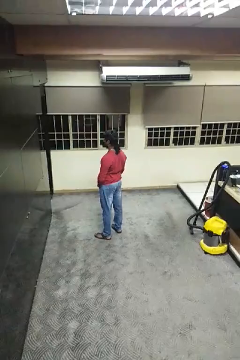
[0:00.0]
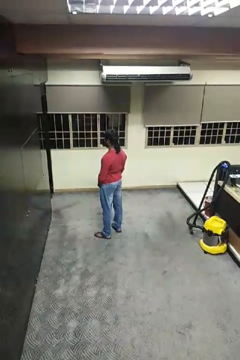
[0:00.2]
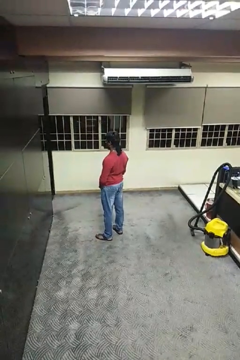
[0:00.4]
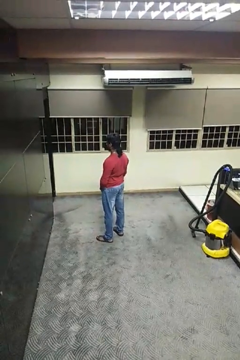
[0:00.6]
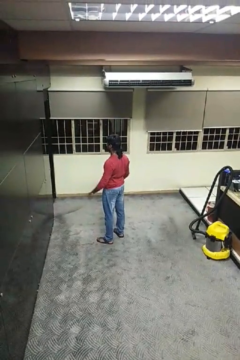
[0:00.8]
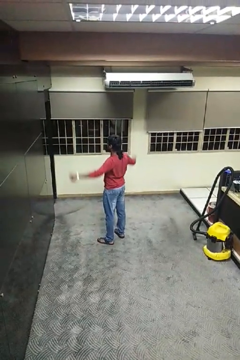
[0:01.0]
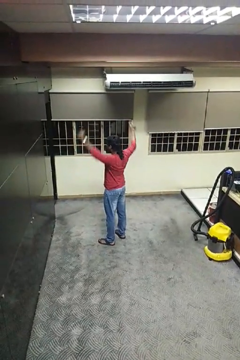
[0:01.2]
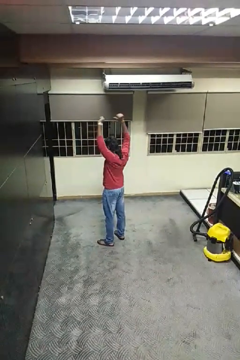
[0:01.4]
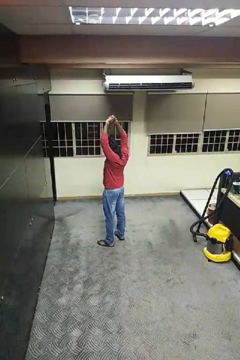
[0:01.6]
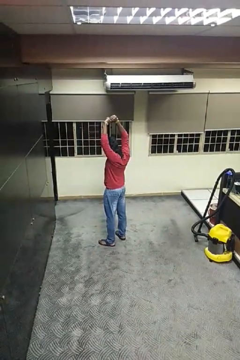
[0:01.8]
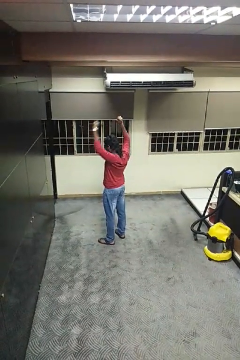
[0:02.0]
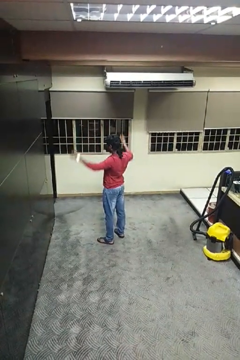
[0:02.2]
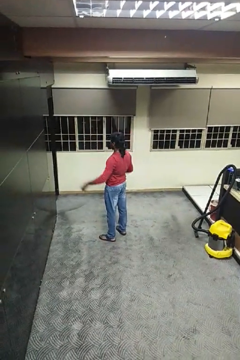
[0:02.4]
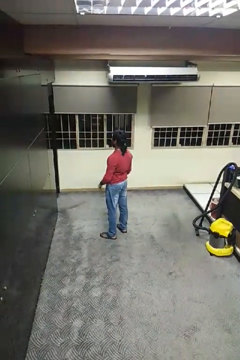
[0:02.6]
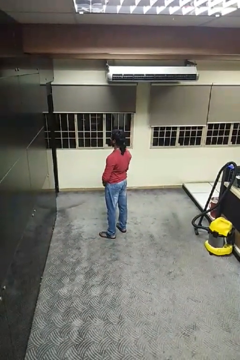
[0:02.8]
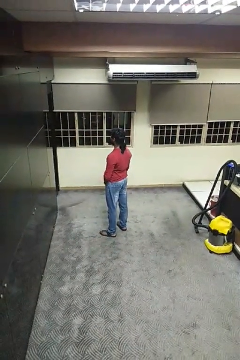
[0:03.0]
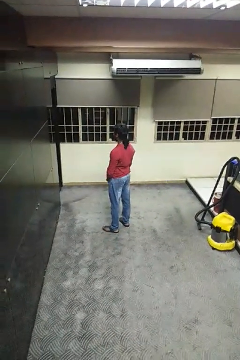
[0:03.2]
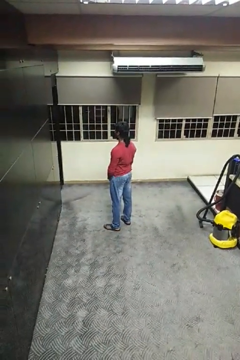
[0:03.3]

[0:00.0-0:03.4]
person stretches arms over head

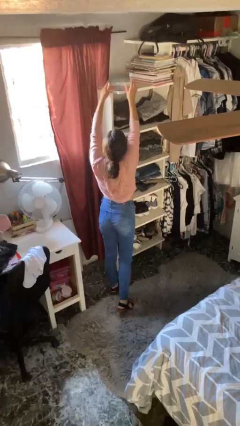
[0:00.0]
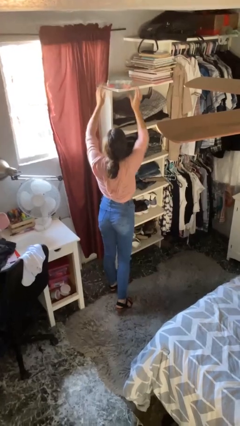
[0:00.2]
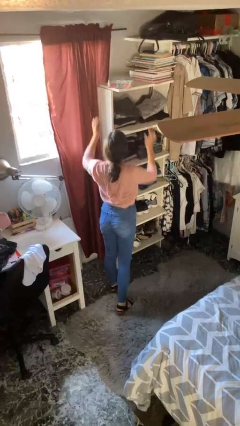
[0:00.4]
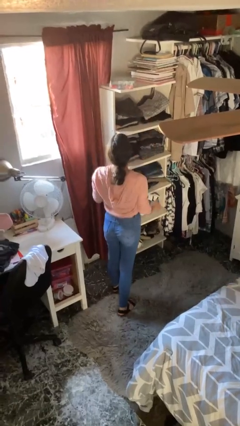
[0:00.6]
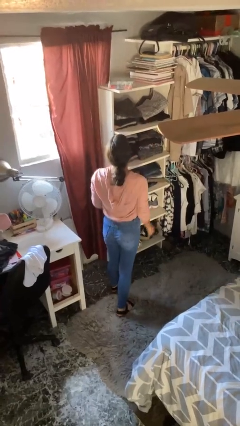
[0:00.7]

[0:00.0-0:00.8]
person puts down object on shelf

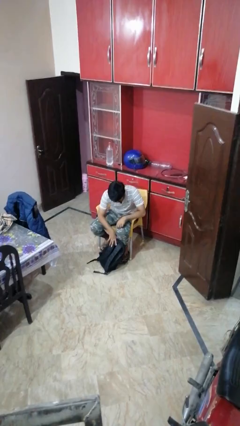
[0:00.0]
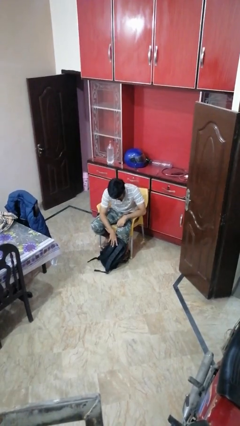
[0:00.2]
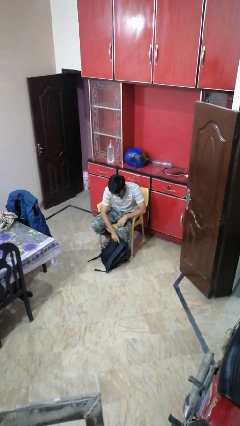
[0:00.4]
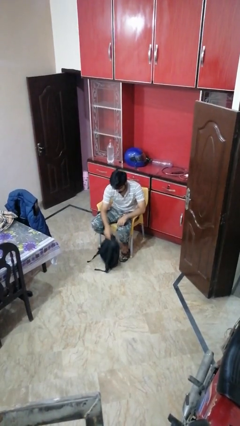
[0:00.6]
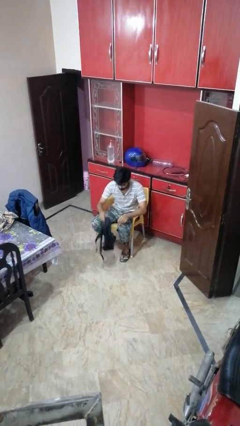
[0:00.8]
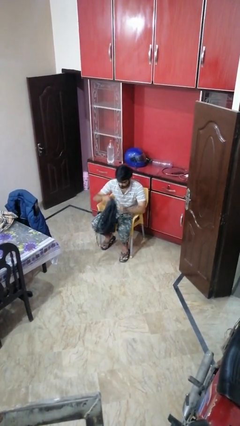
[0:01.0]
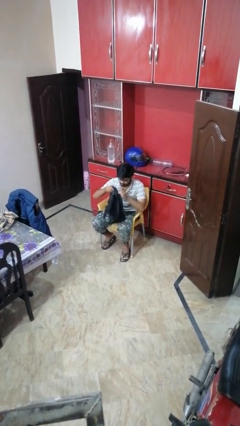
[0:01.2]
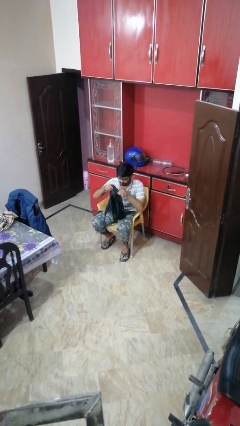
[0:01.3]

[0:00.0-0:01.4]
person picks up object from floor

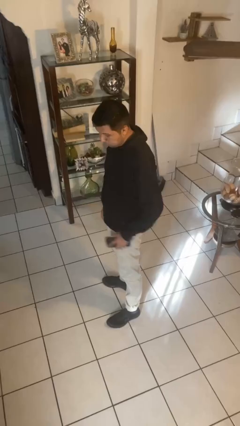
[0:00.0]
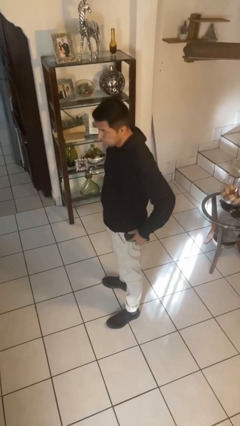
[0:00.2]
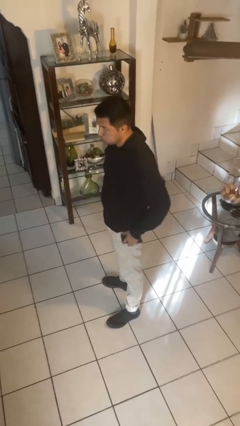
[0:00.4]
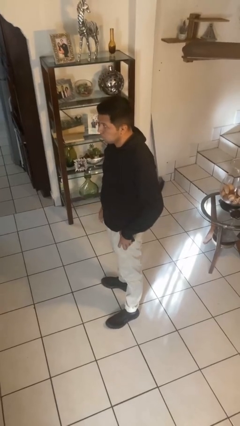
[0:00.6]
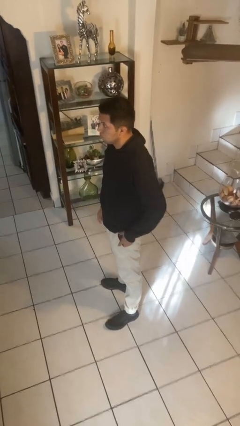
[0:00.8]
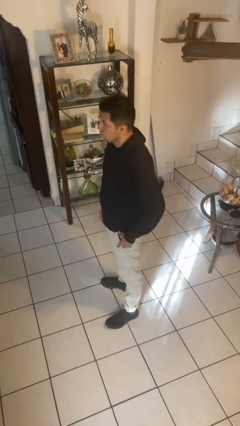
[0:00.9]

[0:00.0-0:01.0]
person puts phone into pocket

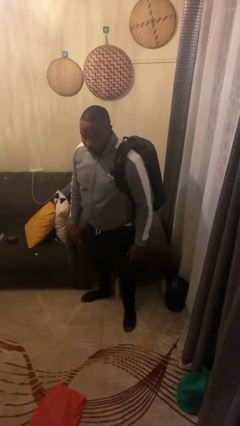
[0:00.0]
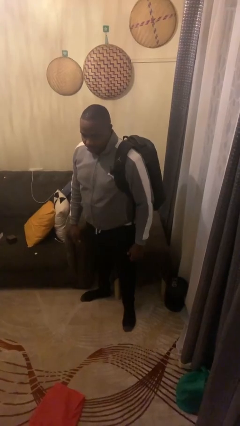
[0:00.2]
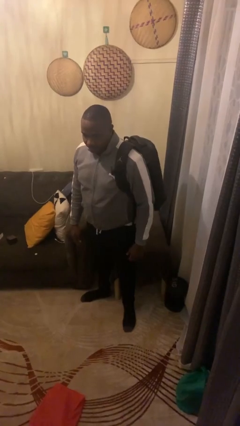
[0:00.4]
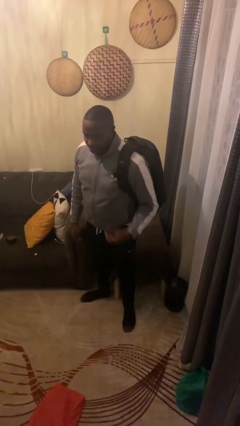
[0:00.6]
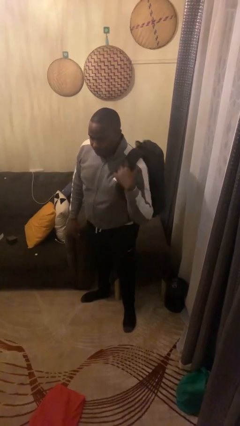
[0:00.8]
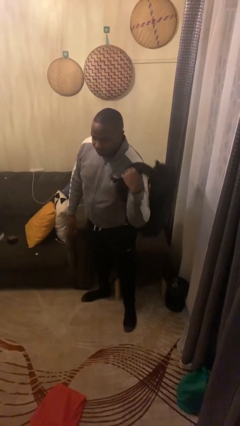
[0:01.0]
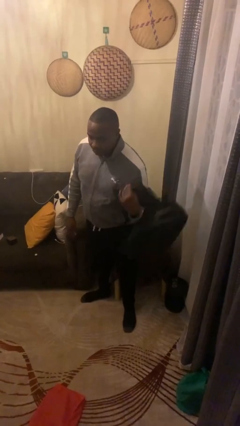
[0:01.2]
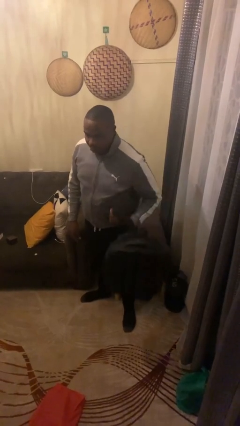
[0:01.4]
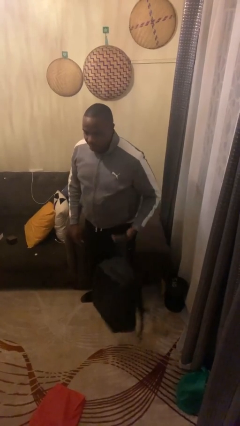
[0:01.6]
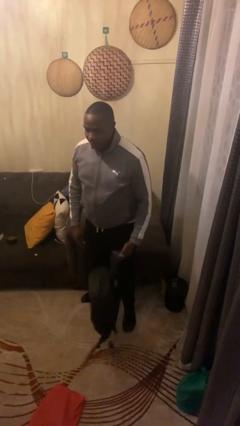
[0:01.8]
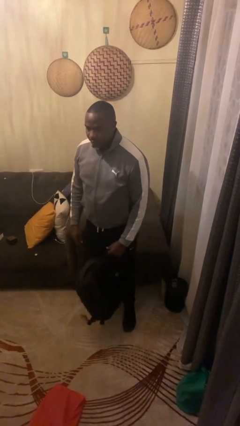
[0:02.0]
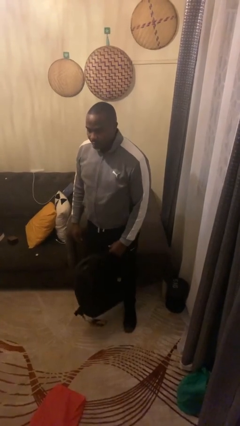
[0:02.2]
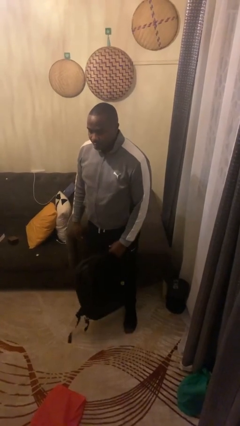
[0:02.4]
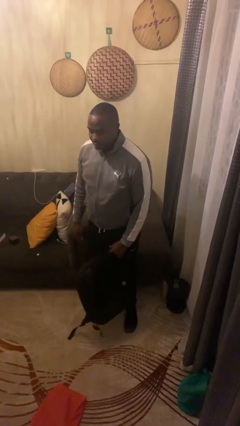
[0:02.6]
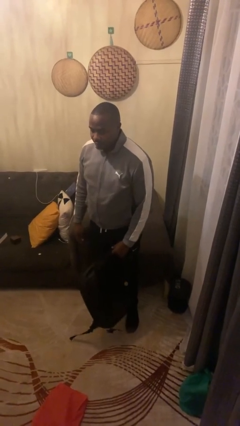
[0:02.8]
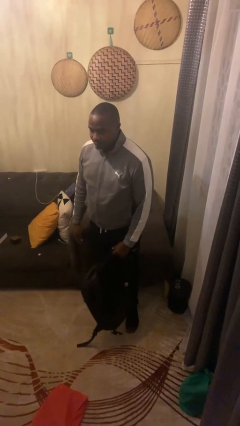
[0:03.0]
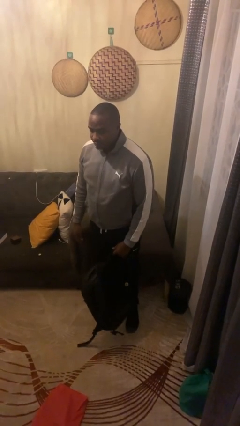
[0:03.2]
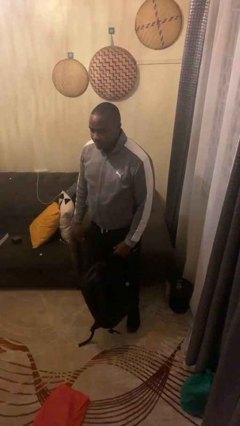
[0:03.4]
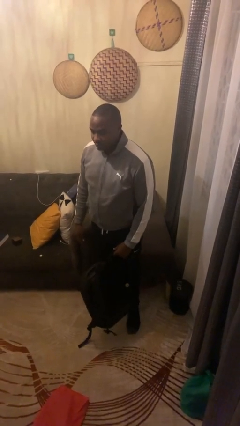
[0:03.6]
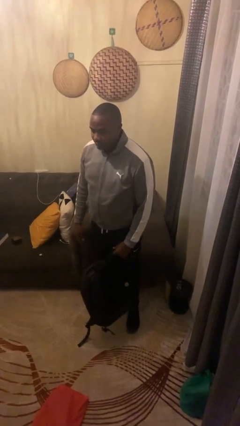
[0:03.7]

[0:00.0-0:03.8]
person takes off backpack

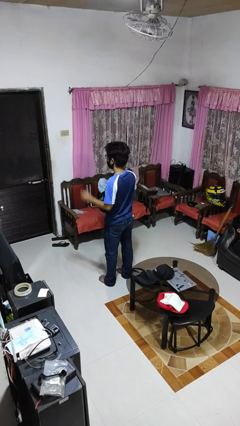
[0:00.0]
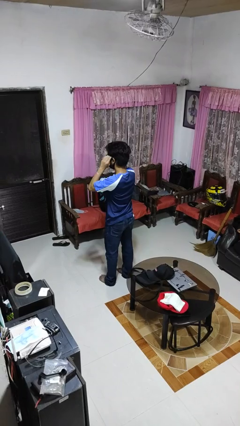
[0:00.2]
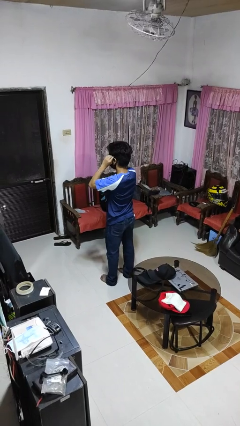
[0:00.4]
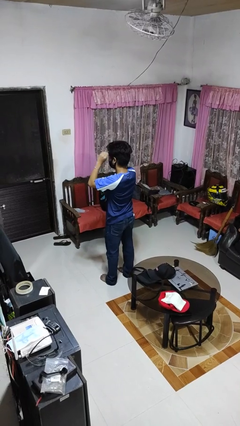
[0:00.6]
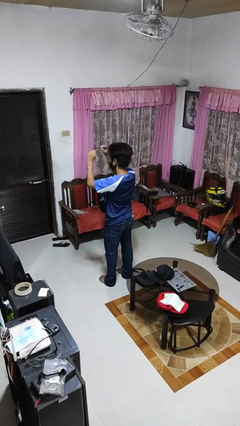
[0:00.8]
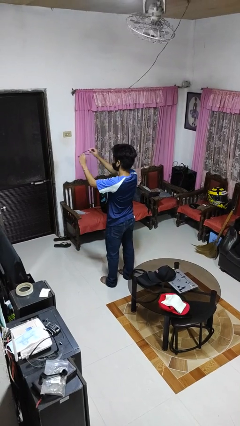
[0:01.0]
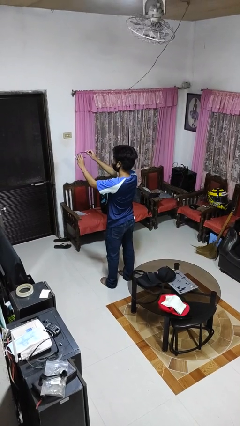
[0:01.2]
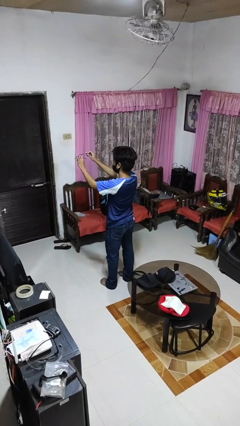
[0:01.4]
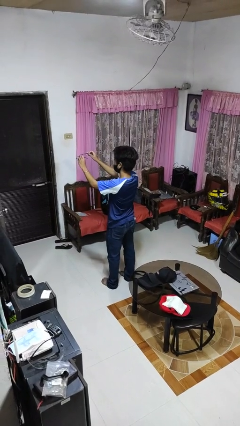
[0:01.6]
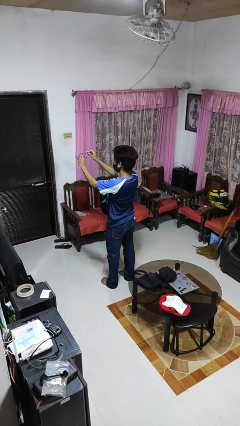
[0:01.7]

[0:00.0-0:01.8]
person takes off glasses

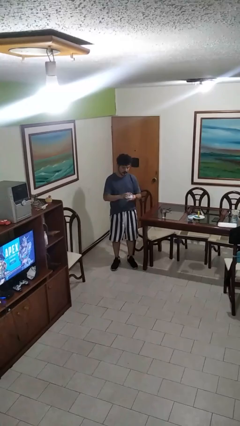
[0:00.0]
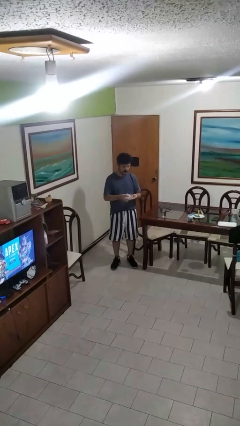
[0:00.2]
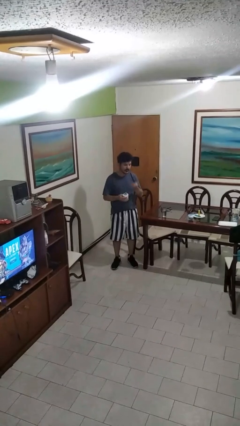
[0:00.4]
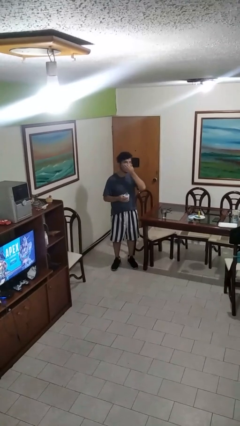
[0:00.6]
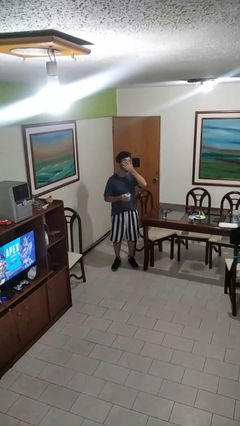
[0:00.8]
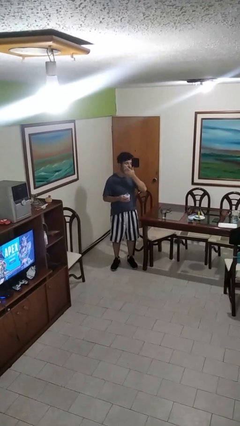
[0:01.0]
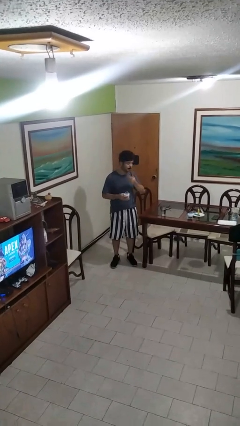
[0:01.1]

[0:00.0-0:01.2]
person takes medicine pills

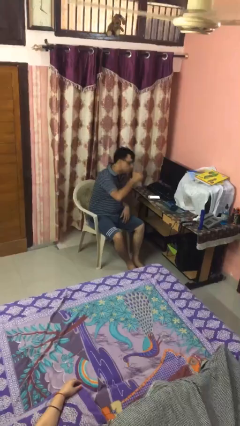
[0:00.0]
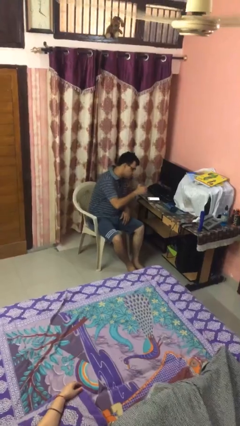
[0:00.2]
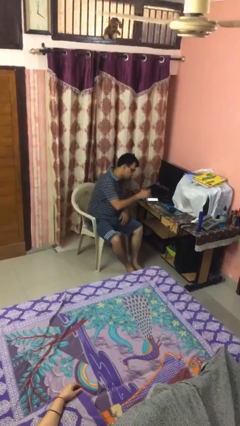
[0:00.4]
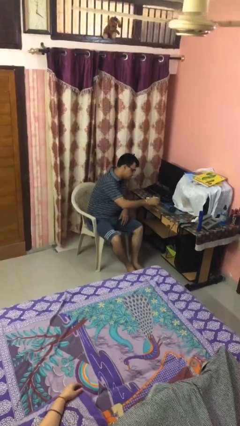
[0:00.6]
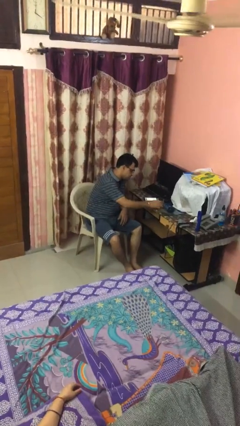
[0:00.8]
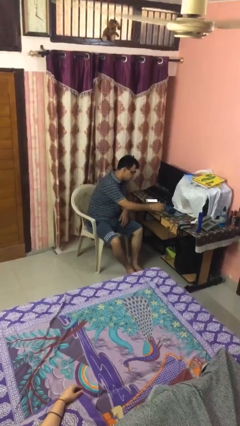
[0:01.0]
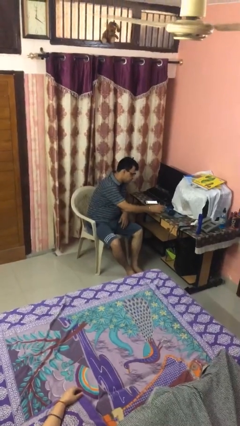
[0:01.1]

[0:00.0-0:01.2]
person puts down object on table

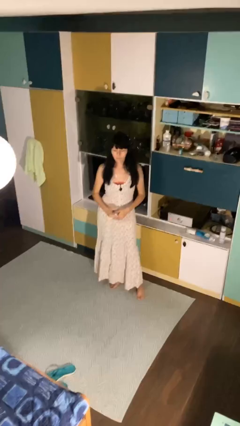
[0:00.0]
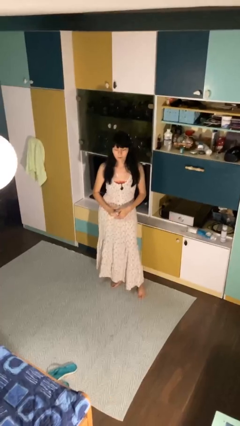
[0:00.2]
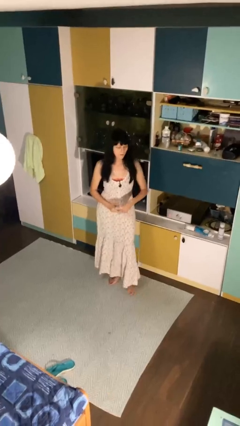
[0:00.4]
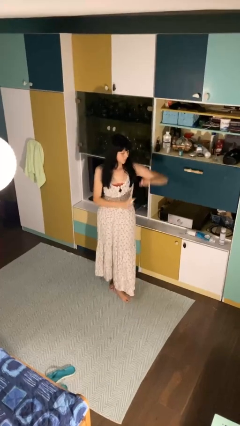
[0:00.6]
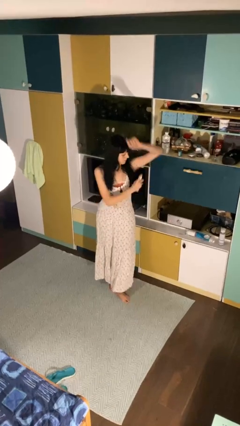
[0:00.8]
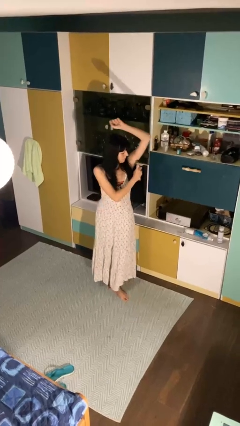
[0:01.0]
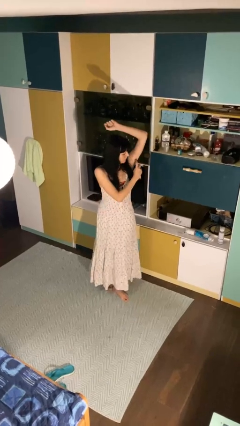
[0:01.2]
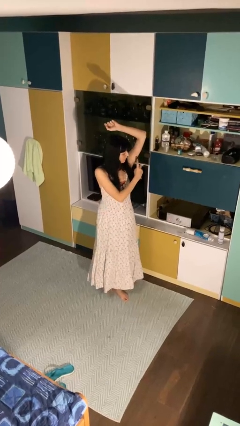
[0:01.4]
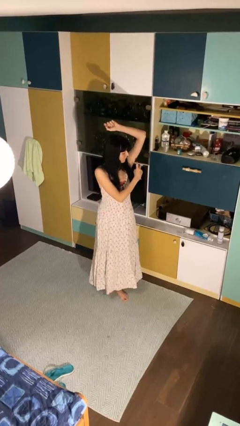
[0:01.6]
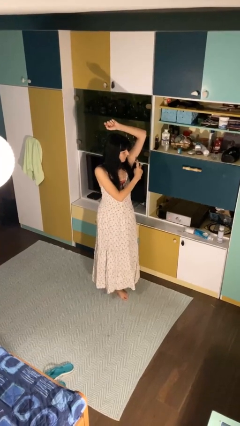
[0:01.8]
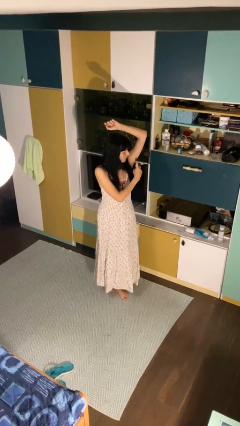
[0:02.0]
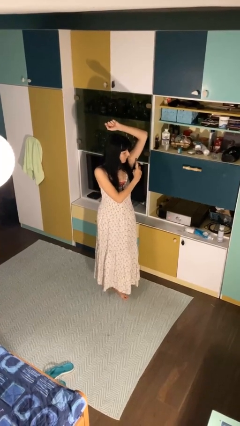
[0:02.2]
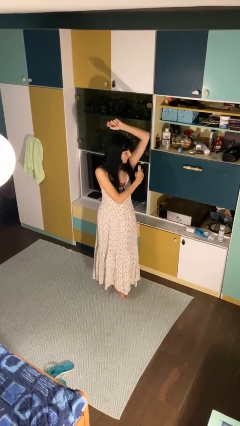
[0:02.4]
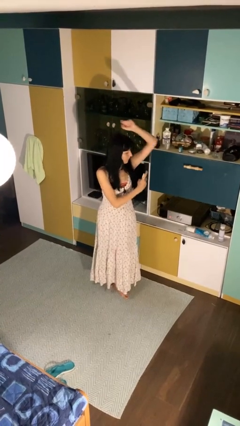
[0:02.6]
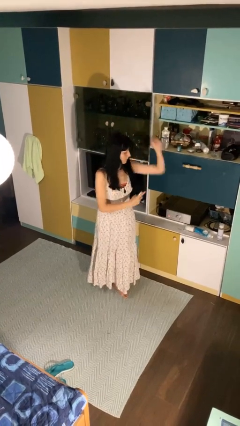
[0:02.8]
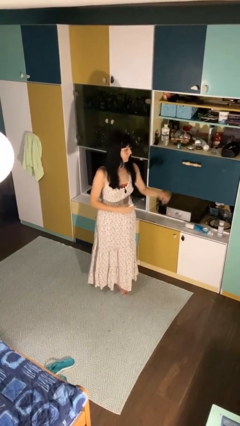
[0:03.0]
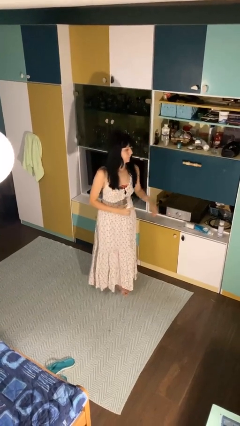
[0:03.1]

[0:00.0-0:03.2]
person applies deodorant
